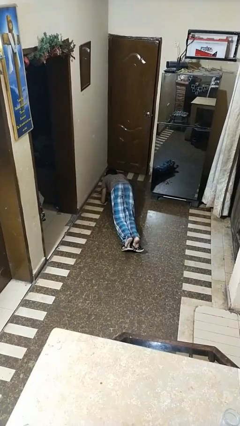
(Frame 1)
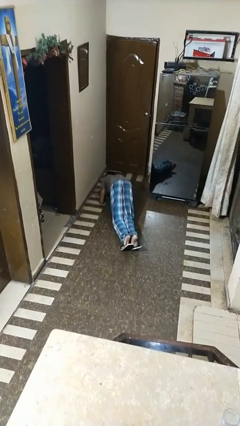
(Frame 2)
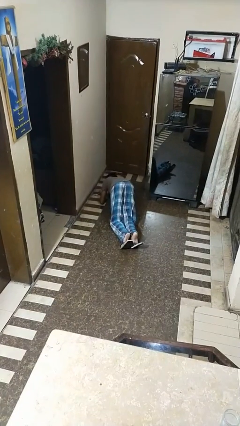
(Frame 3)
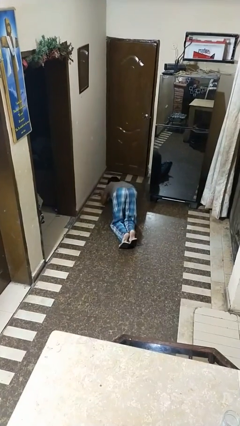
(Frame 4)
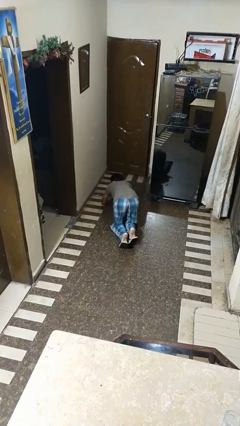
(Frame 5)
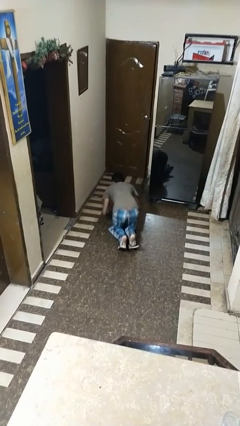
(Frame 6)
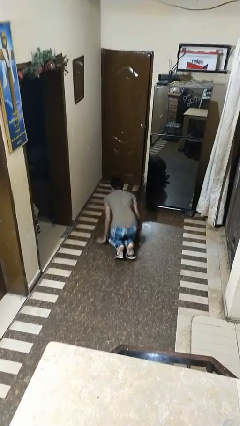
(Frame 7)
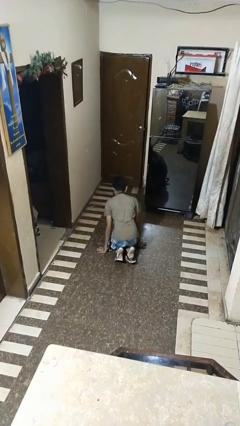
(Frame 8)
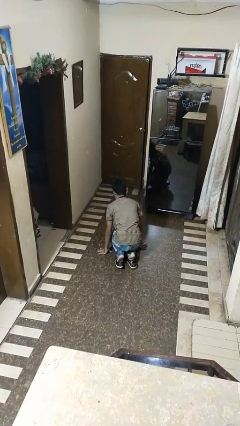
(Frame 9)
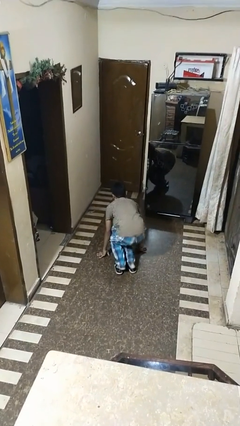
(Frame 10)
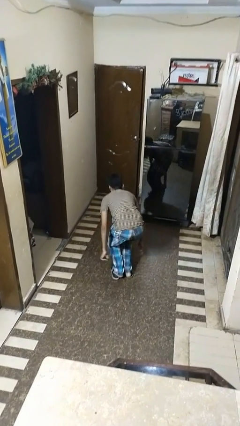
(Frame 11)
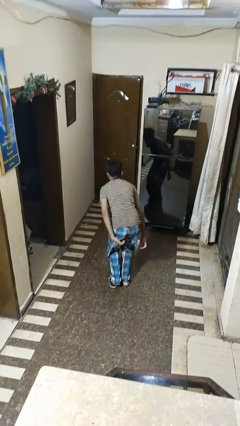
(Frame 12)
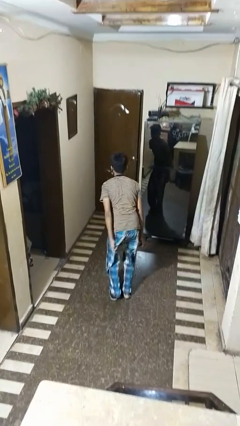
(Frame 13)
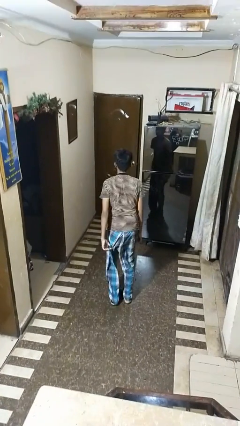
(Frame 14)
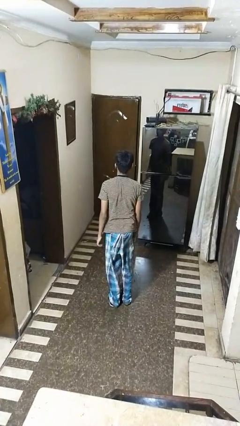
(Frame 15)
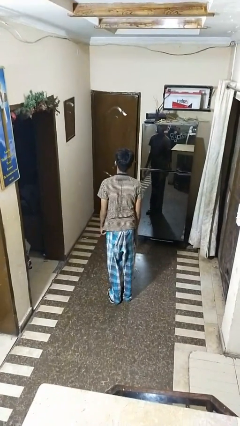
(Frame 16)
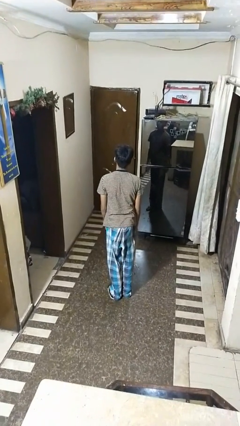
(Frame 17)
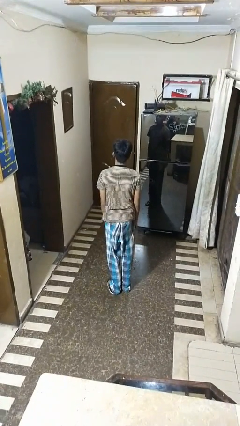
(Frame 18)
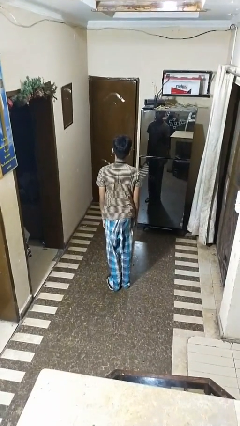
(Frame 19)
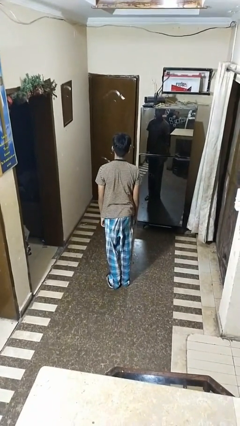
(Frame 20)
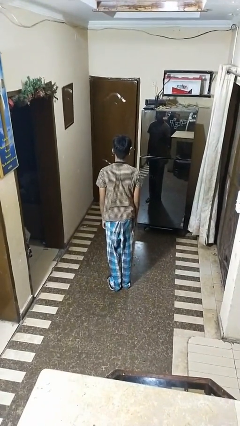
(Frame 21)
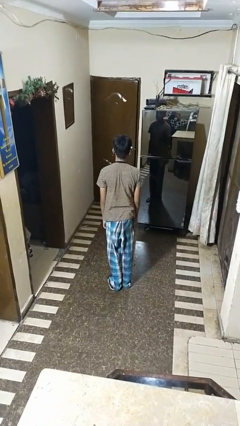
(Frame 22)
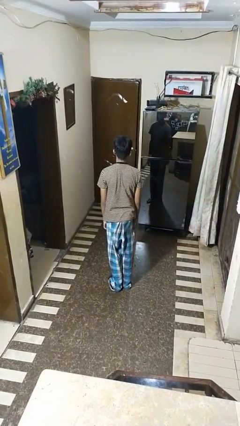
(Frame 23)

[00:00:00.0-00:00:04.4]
person stands up from floor

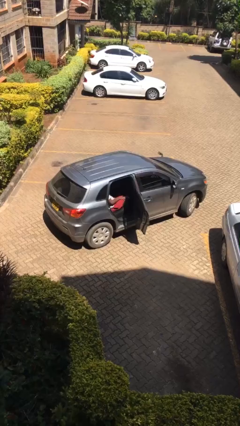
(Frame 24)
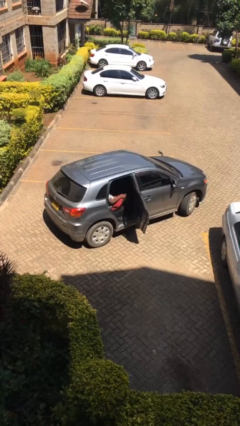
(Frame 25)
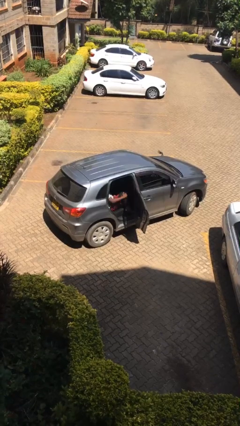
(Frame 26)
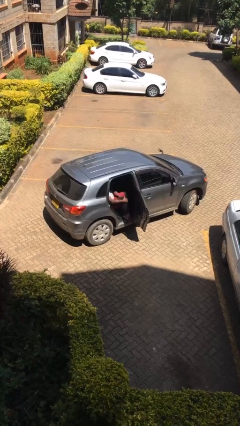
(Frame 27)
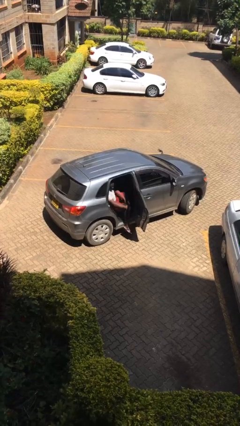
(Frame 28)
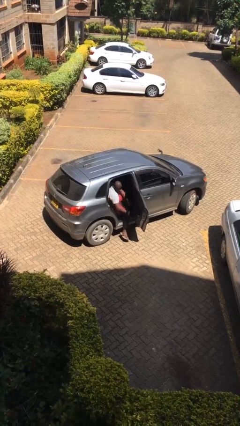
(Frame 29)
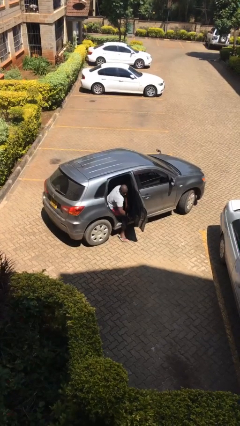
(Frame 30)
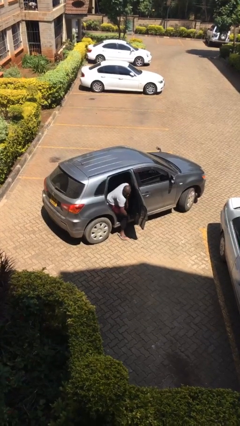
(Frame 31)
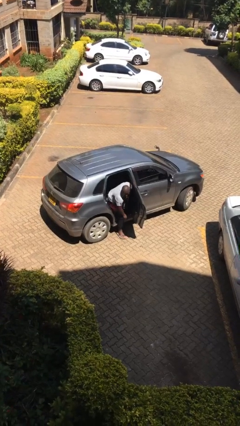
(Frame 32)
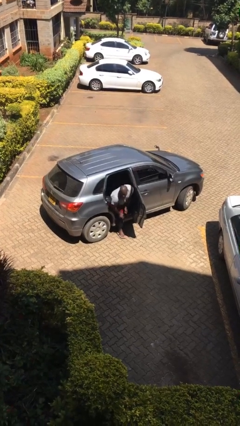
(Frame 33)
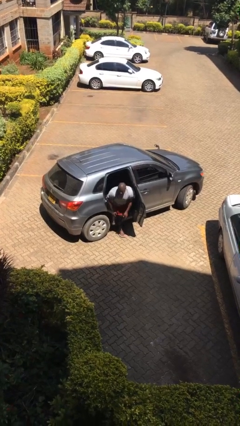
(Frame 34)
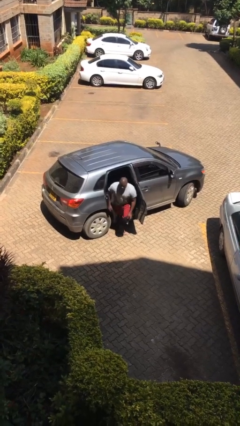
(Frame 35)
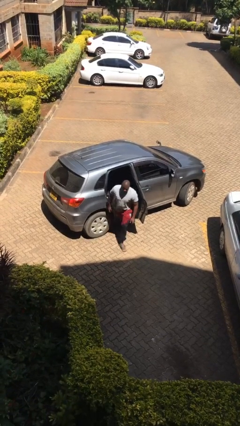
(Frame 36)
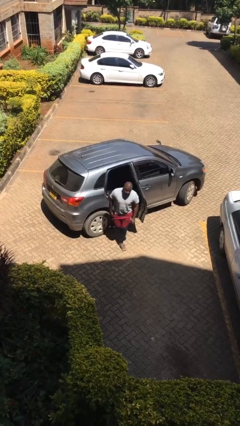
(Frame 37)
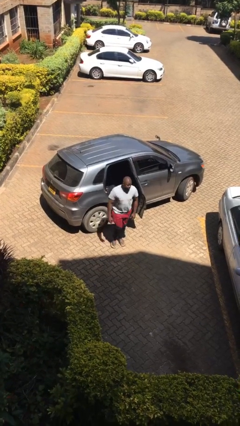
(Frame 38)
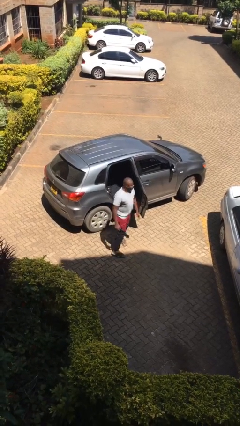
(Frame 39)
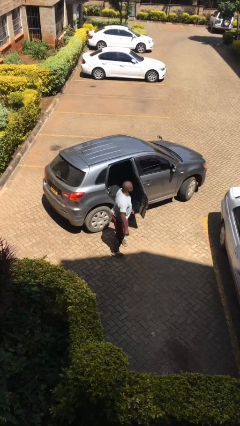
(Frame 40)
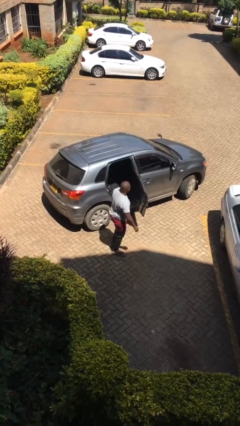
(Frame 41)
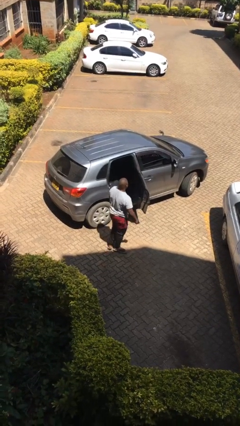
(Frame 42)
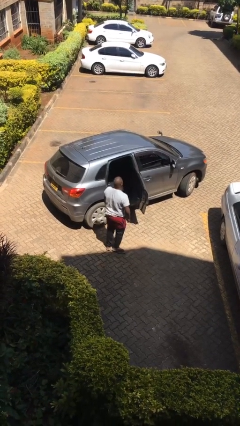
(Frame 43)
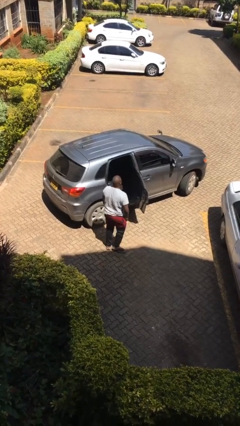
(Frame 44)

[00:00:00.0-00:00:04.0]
person exits car

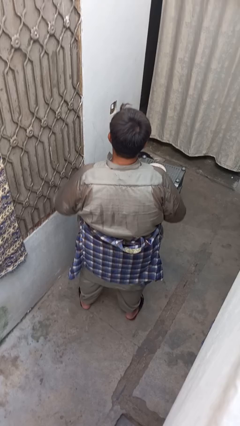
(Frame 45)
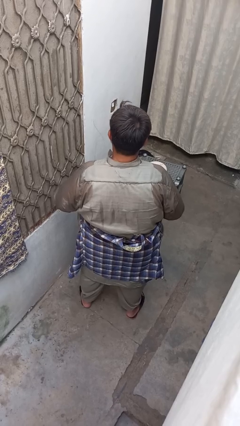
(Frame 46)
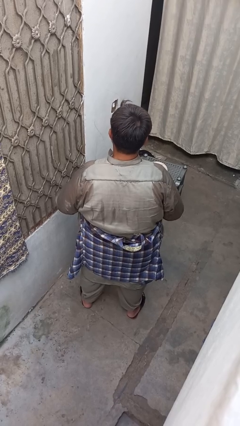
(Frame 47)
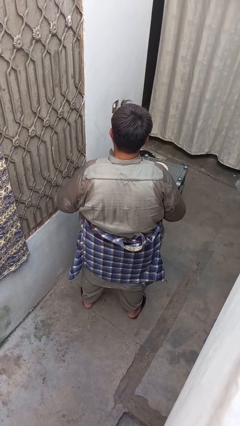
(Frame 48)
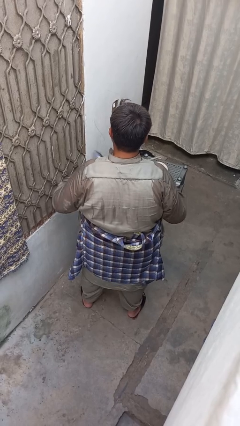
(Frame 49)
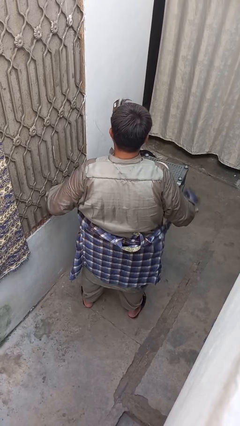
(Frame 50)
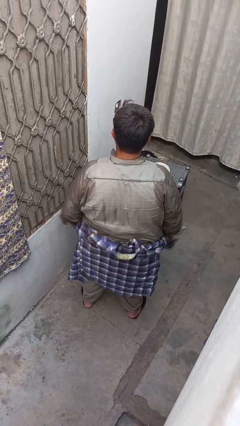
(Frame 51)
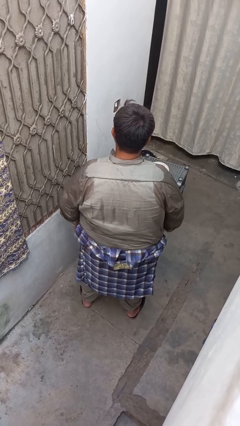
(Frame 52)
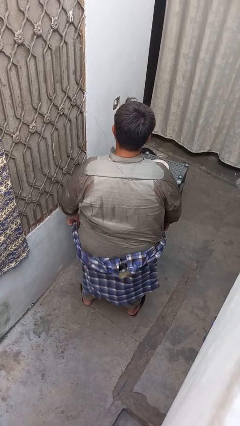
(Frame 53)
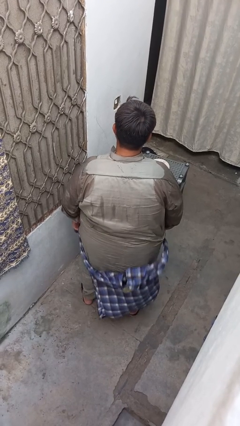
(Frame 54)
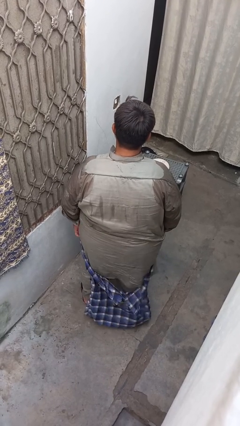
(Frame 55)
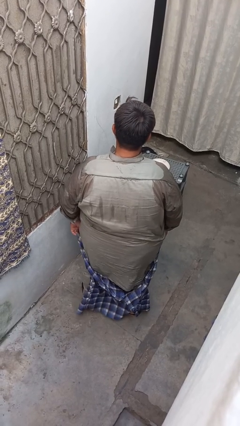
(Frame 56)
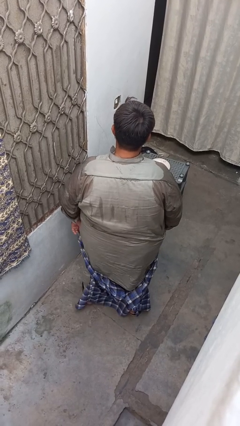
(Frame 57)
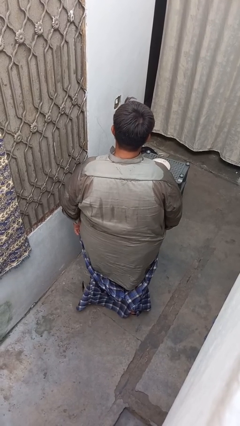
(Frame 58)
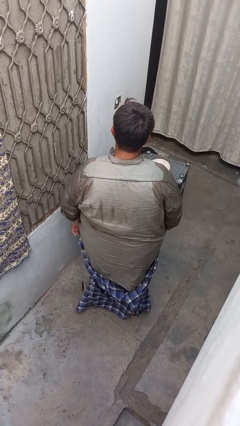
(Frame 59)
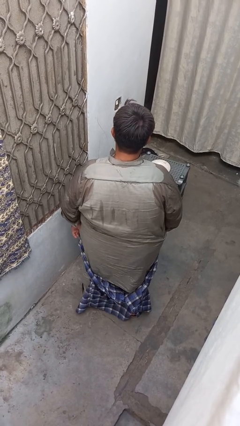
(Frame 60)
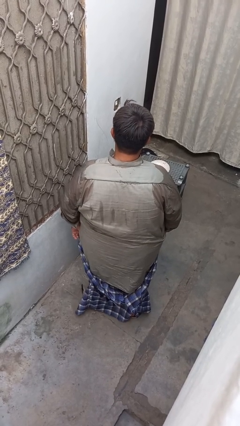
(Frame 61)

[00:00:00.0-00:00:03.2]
person unties jacket around waist

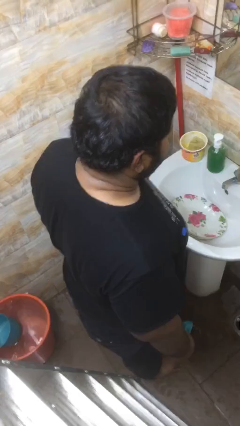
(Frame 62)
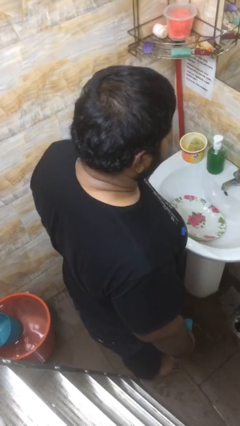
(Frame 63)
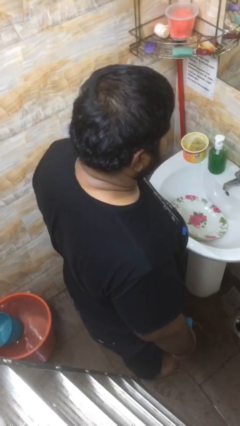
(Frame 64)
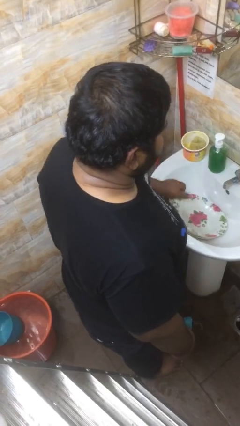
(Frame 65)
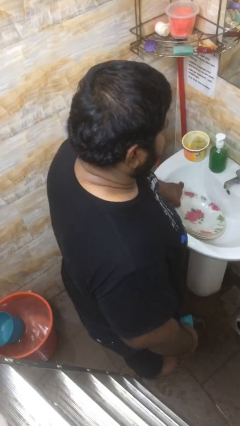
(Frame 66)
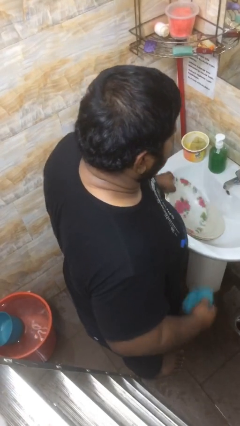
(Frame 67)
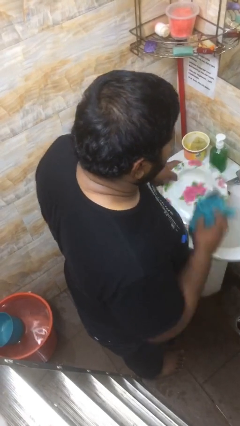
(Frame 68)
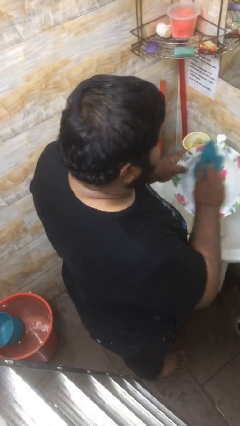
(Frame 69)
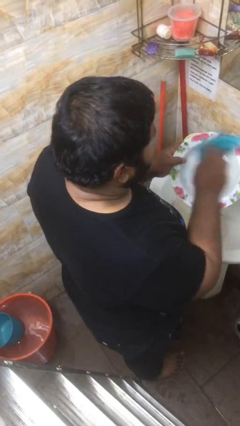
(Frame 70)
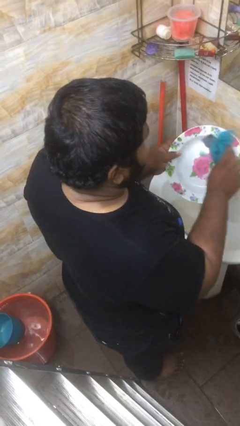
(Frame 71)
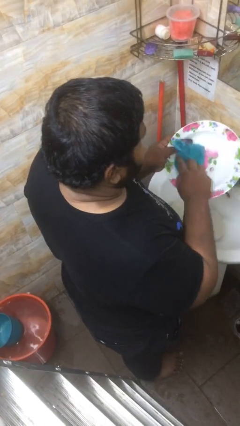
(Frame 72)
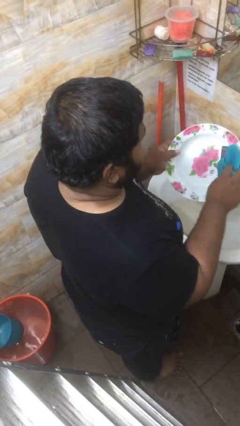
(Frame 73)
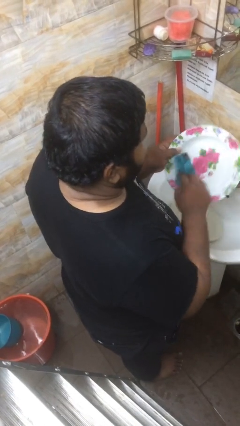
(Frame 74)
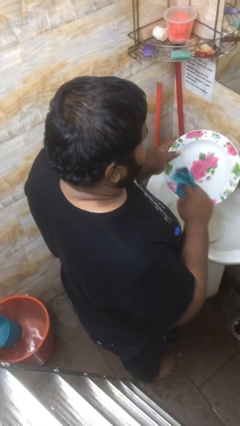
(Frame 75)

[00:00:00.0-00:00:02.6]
person dries dish

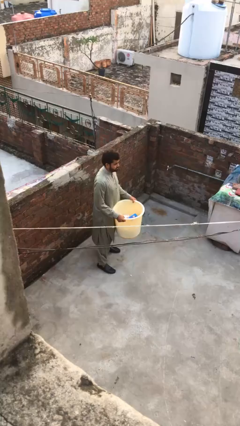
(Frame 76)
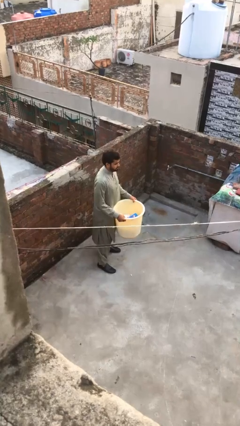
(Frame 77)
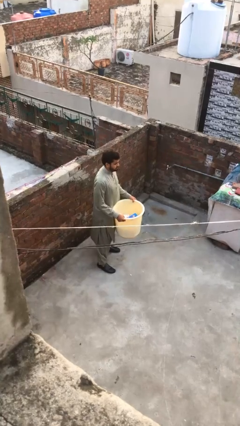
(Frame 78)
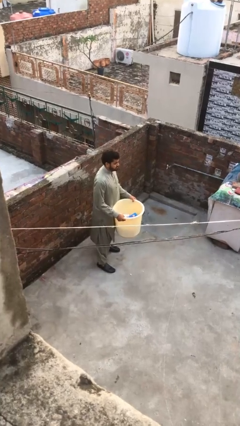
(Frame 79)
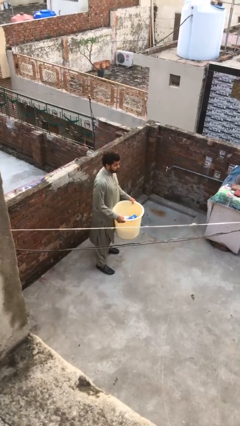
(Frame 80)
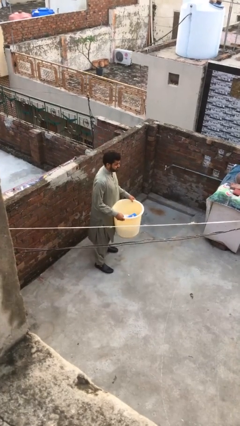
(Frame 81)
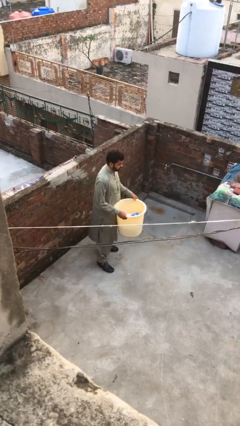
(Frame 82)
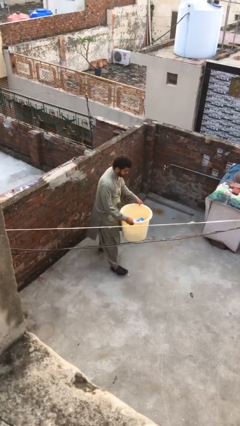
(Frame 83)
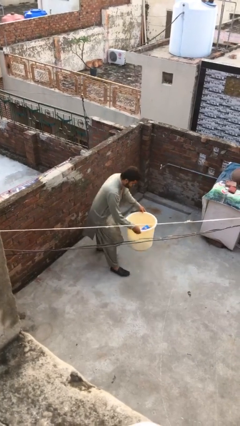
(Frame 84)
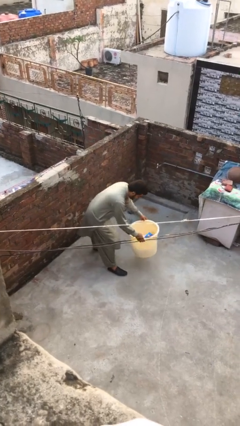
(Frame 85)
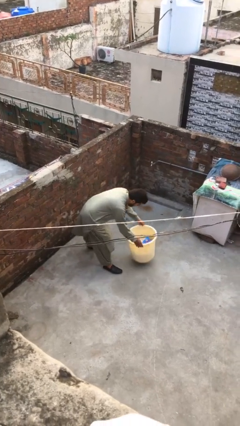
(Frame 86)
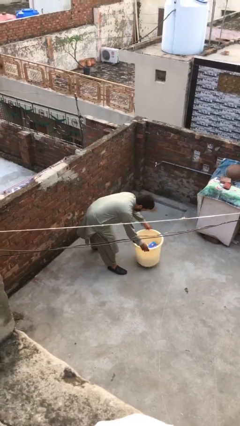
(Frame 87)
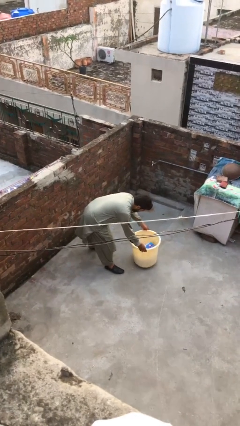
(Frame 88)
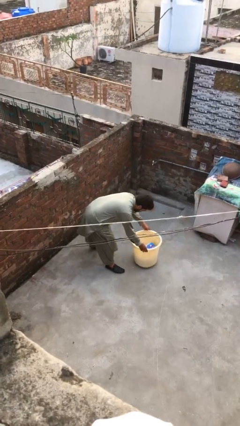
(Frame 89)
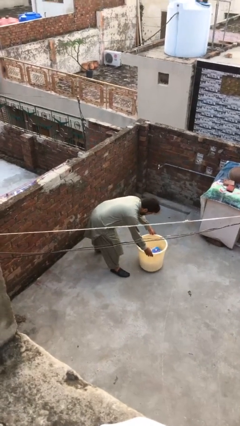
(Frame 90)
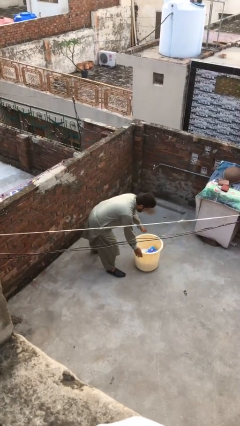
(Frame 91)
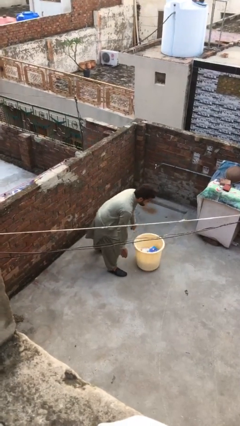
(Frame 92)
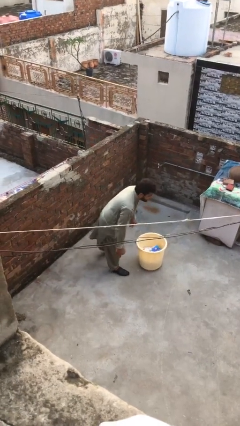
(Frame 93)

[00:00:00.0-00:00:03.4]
person puts down object on floor

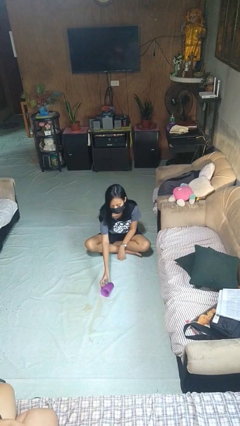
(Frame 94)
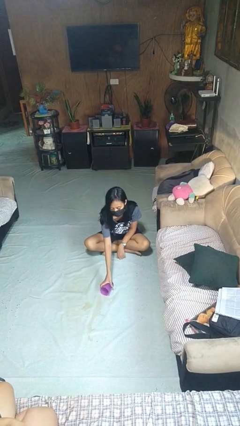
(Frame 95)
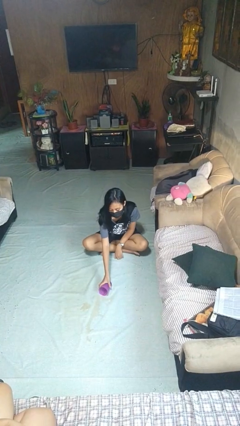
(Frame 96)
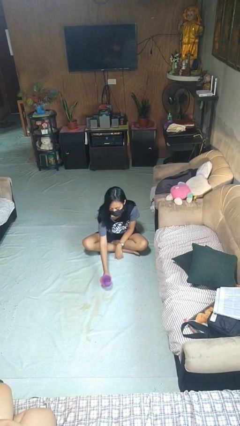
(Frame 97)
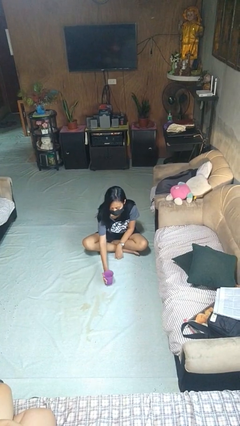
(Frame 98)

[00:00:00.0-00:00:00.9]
person sets upright glass
